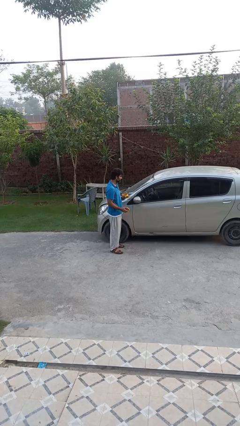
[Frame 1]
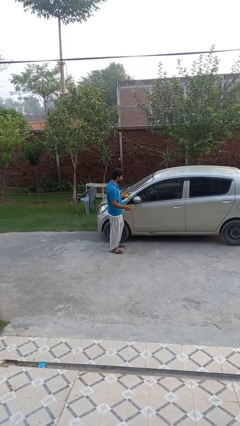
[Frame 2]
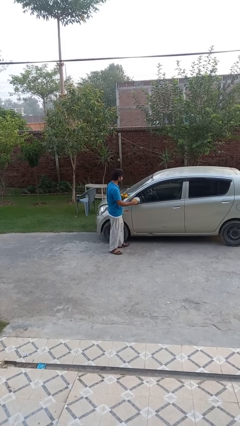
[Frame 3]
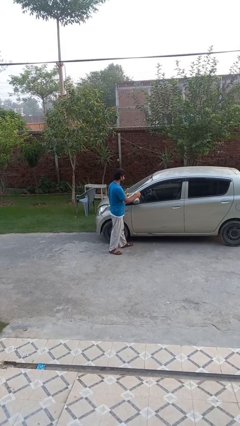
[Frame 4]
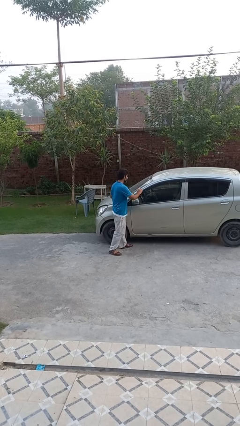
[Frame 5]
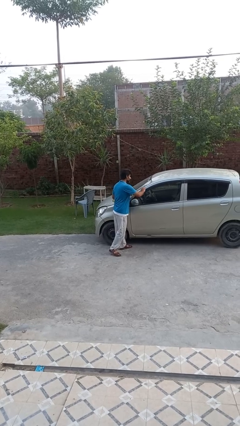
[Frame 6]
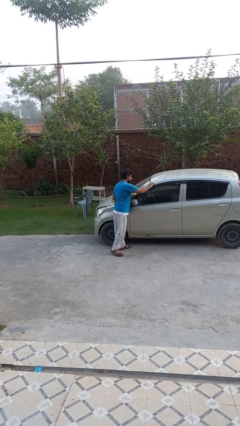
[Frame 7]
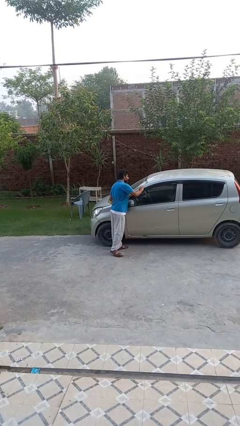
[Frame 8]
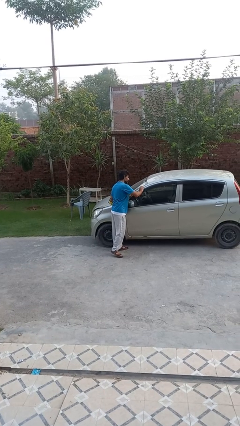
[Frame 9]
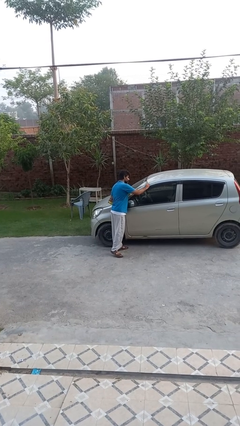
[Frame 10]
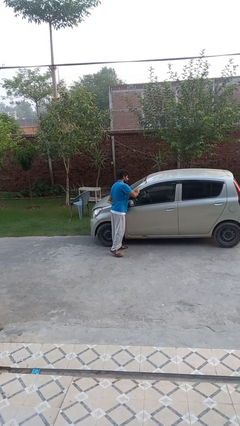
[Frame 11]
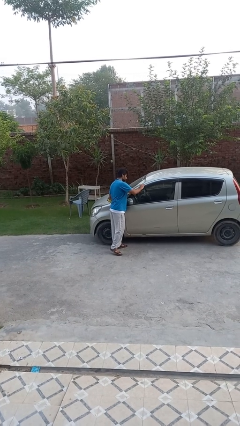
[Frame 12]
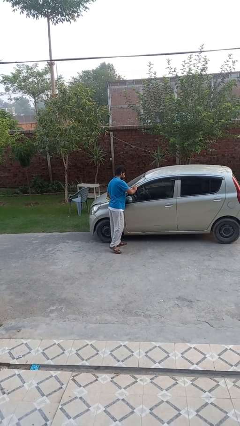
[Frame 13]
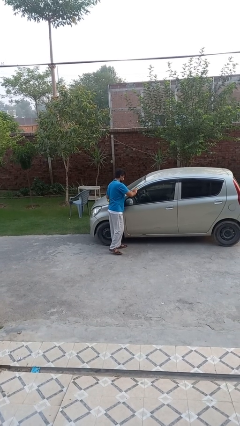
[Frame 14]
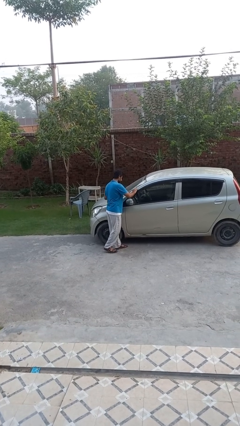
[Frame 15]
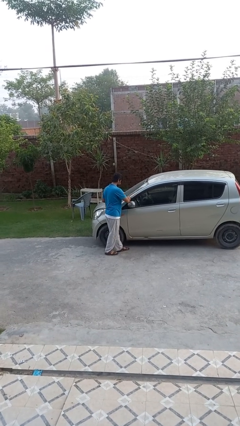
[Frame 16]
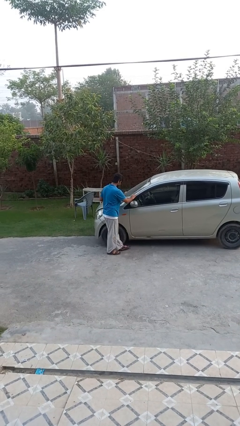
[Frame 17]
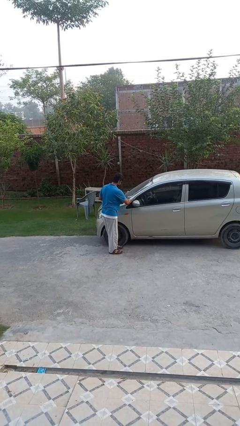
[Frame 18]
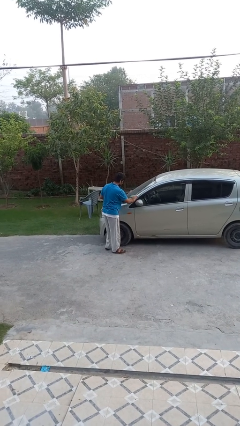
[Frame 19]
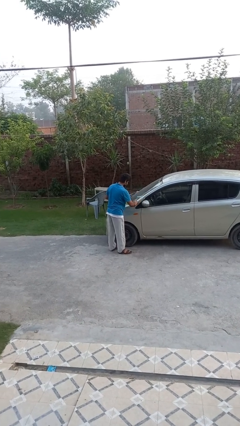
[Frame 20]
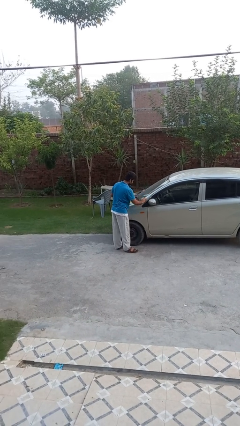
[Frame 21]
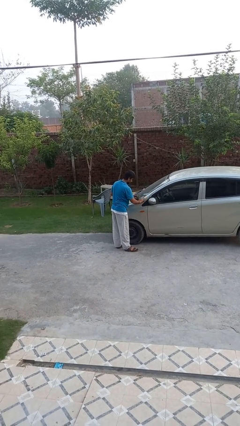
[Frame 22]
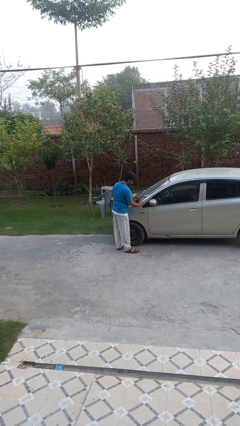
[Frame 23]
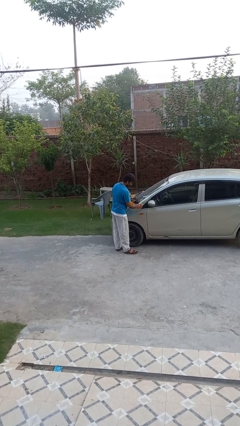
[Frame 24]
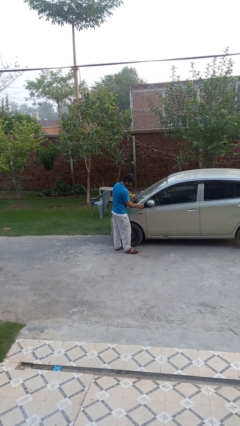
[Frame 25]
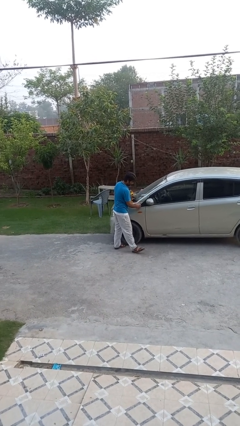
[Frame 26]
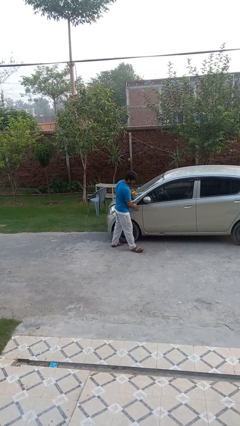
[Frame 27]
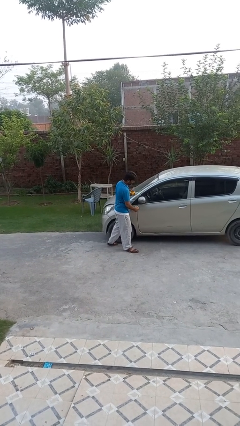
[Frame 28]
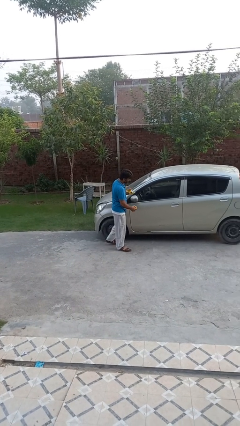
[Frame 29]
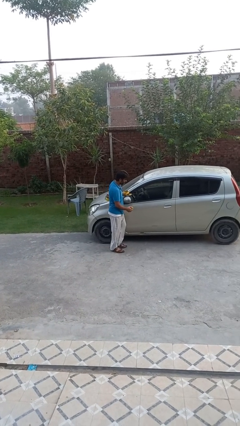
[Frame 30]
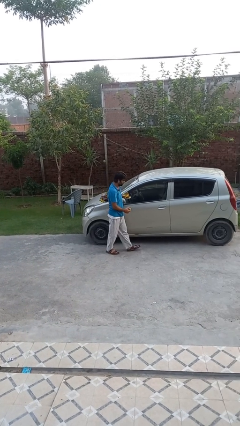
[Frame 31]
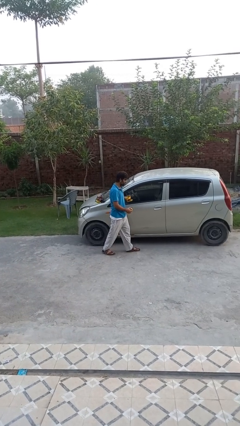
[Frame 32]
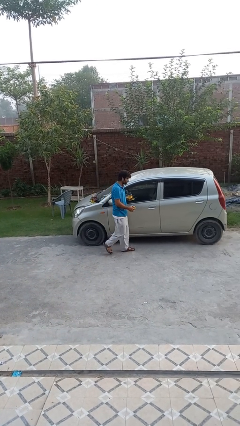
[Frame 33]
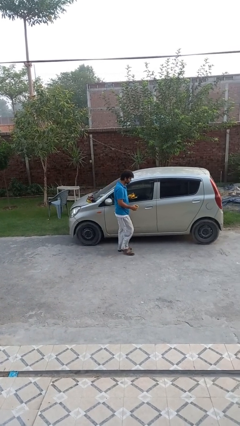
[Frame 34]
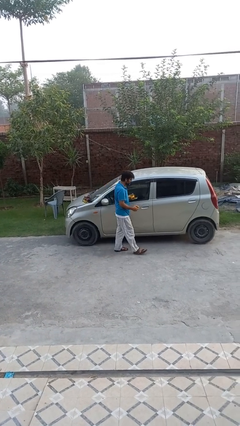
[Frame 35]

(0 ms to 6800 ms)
person polishes car with rag

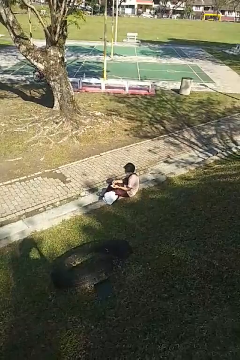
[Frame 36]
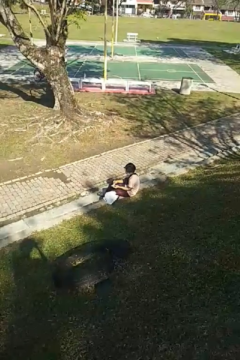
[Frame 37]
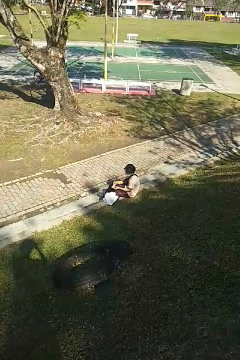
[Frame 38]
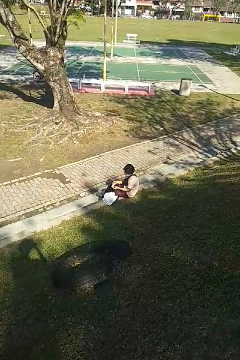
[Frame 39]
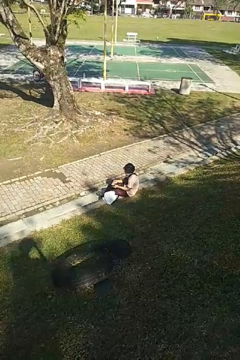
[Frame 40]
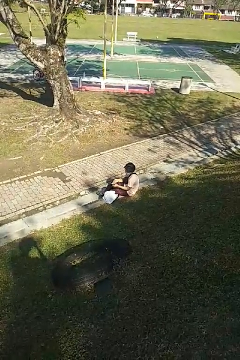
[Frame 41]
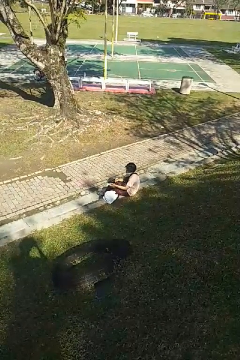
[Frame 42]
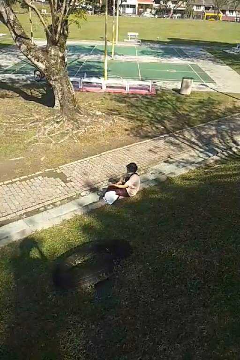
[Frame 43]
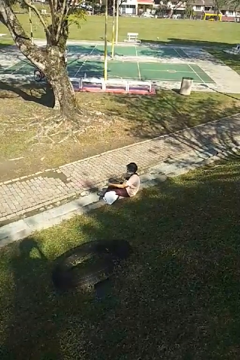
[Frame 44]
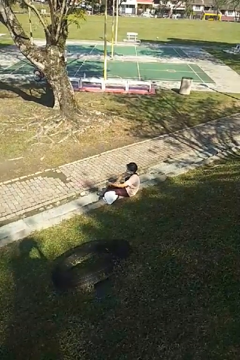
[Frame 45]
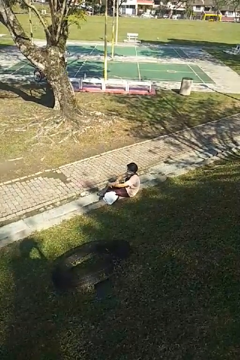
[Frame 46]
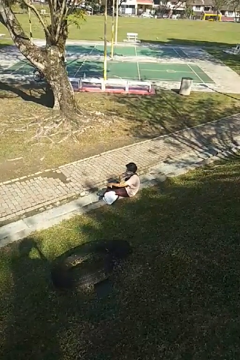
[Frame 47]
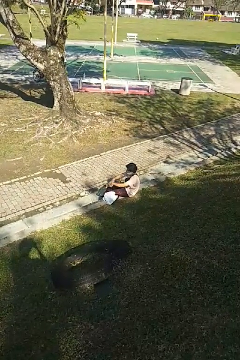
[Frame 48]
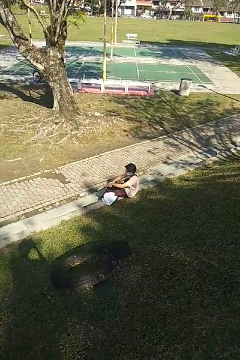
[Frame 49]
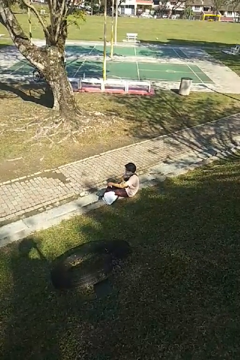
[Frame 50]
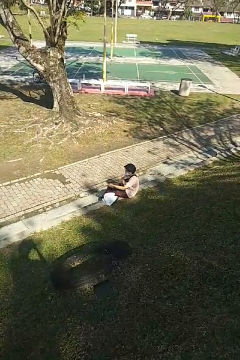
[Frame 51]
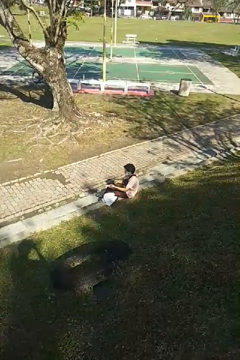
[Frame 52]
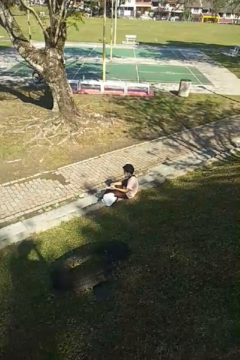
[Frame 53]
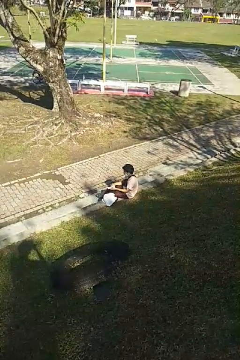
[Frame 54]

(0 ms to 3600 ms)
person applies sunscreen

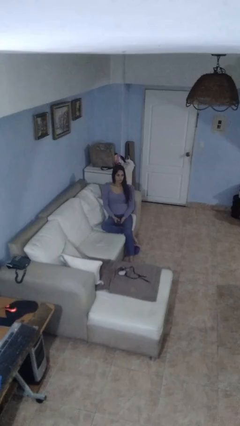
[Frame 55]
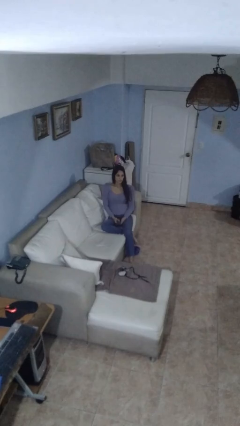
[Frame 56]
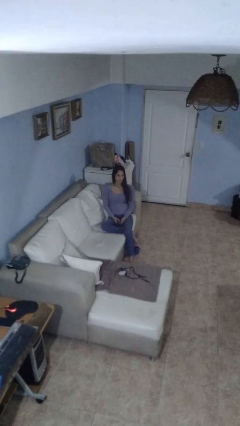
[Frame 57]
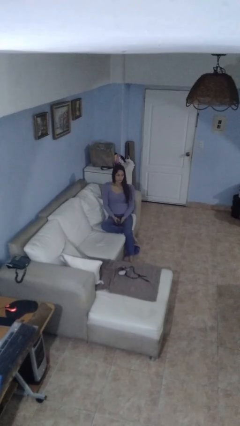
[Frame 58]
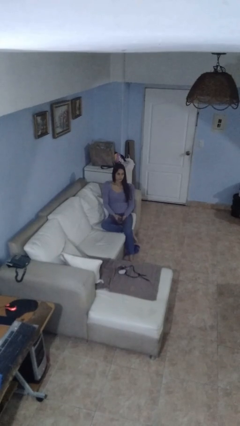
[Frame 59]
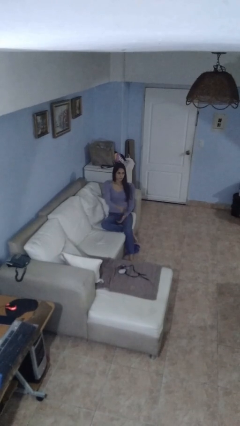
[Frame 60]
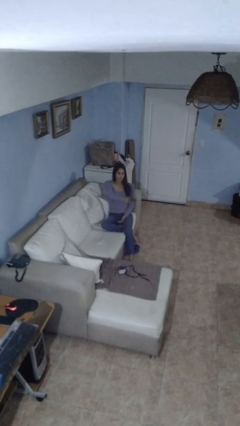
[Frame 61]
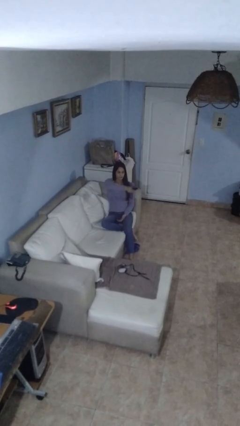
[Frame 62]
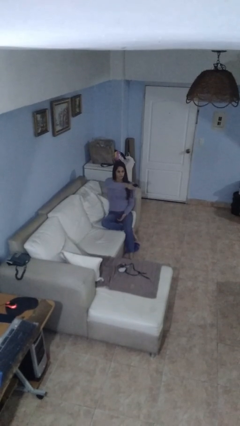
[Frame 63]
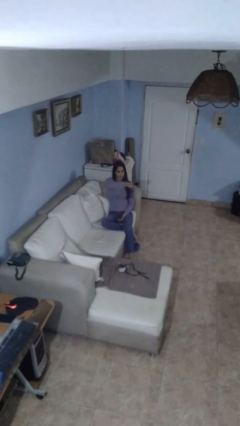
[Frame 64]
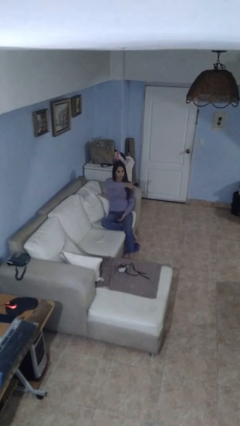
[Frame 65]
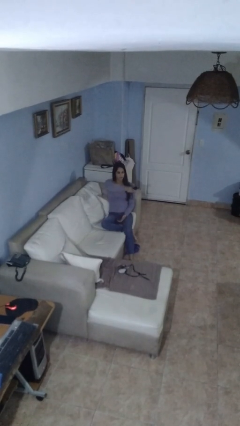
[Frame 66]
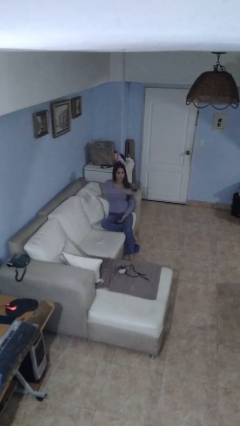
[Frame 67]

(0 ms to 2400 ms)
person uses television remote

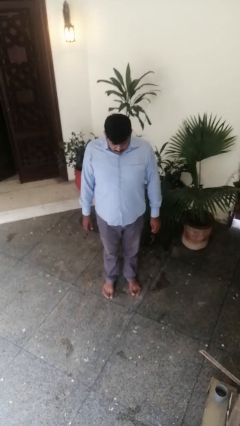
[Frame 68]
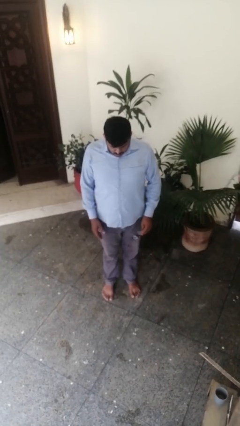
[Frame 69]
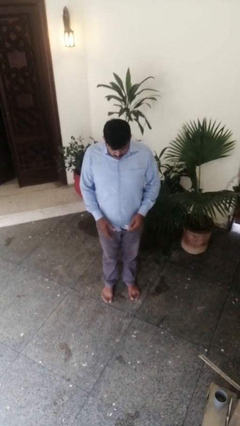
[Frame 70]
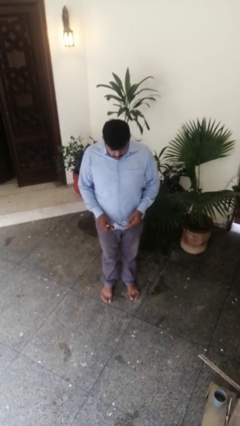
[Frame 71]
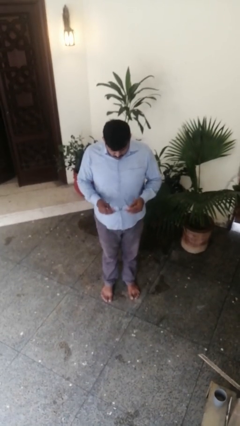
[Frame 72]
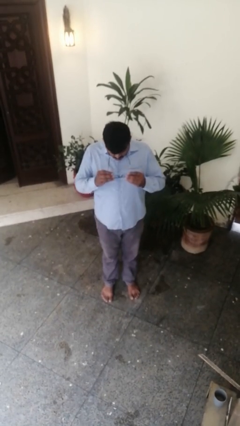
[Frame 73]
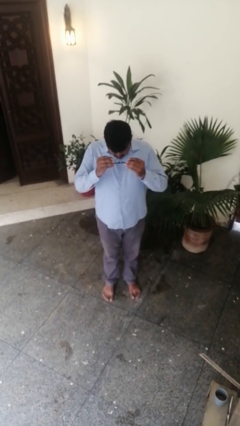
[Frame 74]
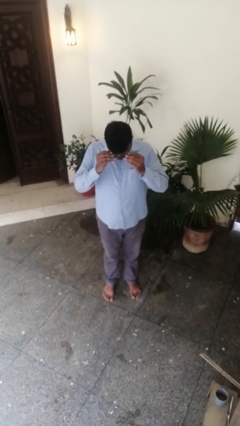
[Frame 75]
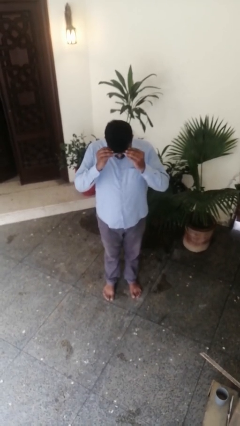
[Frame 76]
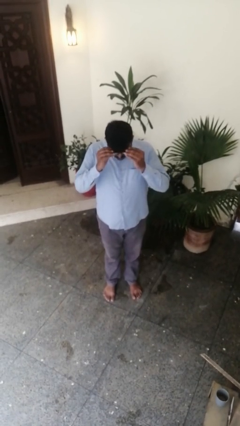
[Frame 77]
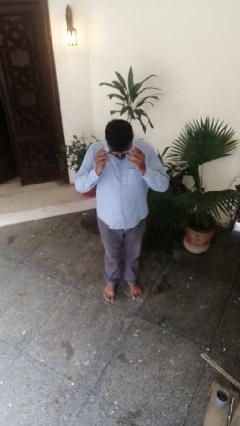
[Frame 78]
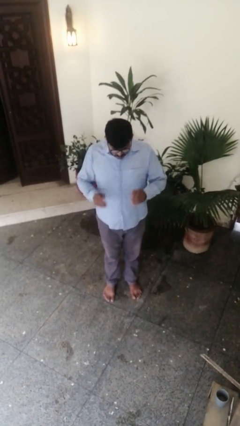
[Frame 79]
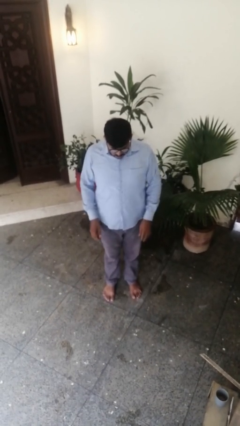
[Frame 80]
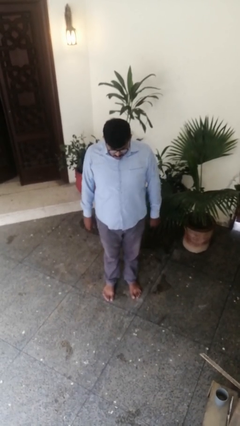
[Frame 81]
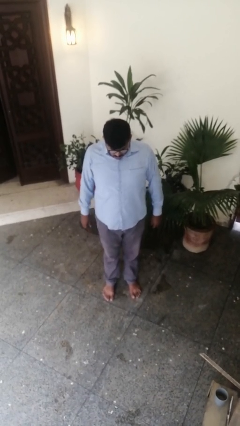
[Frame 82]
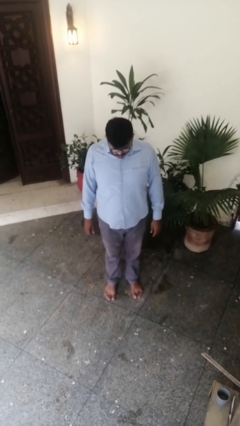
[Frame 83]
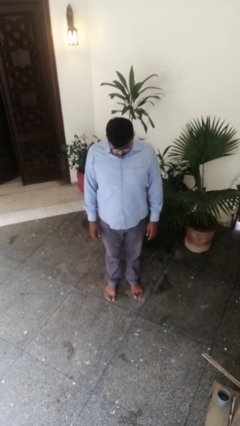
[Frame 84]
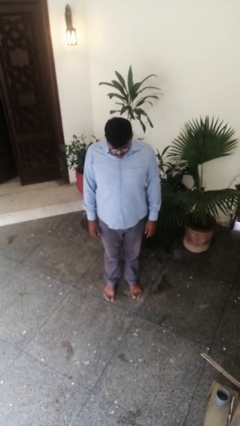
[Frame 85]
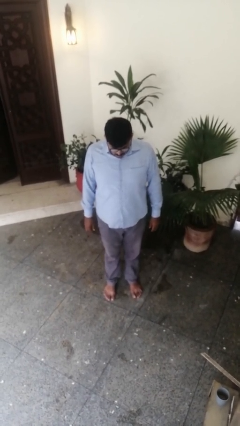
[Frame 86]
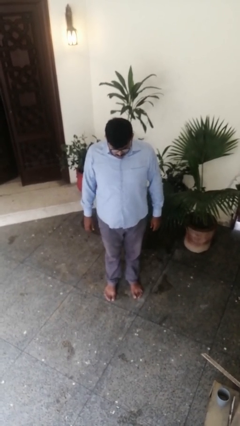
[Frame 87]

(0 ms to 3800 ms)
person puts on glasses

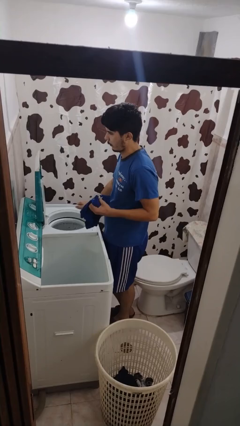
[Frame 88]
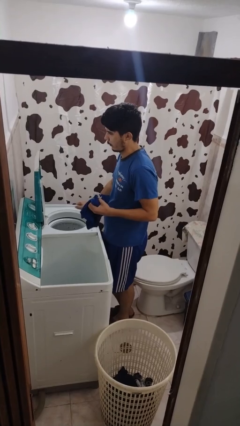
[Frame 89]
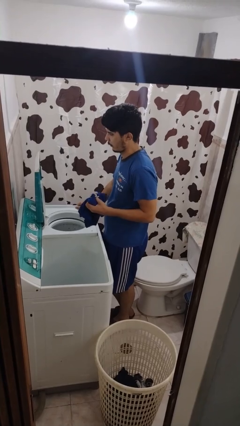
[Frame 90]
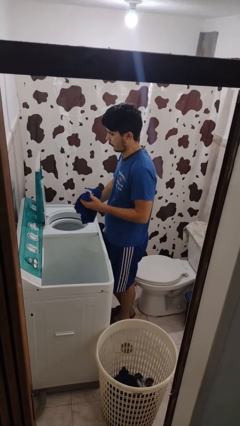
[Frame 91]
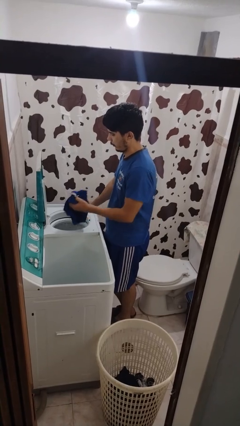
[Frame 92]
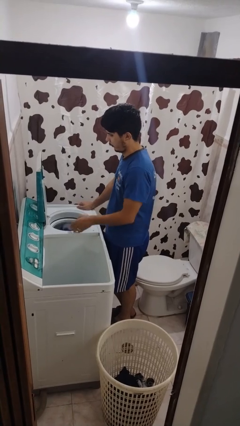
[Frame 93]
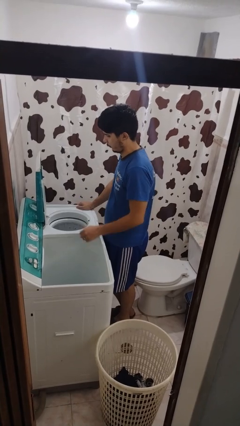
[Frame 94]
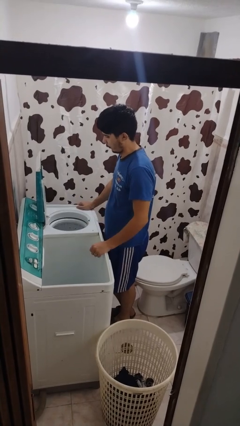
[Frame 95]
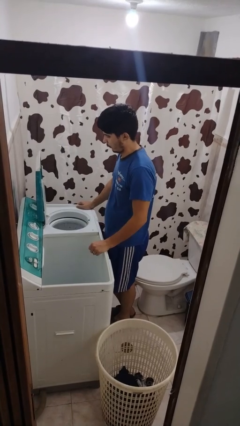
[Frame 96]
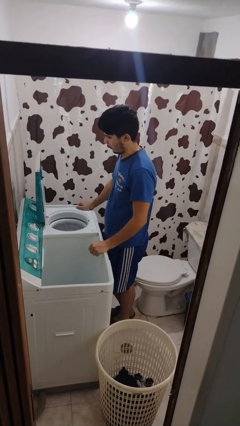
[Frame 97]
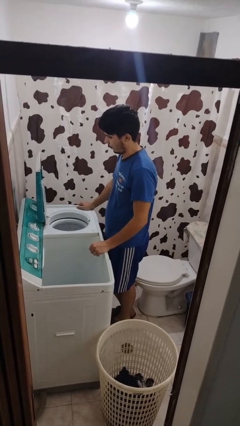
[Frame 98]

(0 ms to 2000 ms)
person loads dryer
